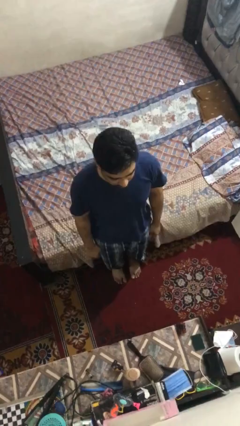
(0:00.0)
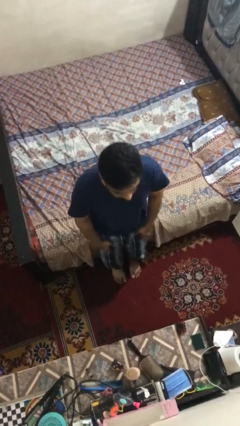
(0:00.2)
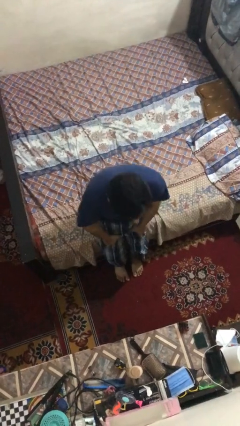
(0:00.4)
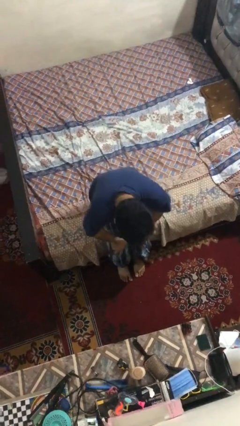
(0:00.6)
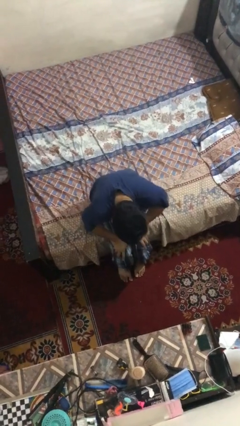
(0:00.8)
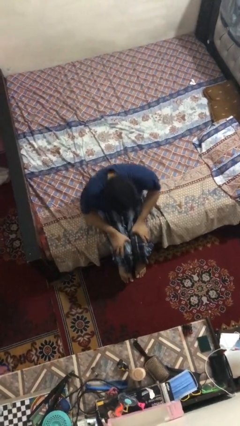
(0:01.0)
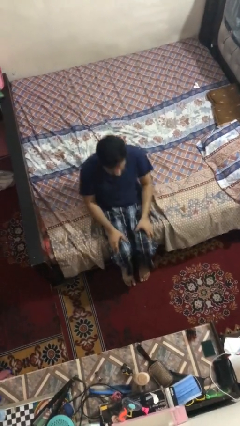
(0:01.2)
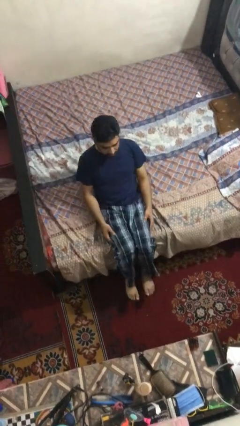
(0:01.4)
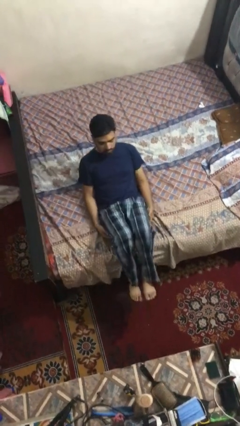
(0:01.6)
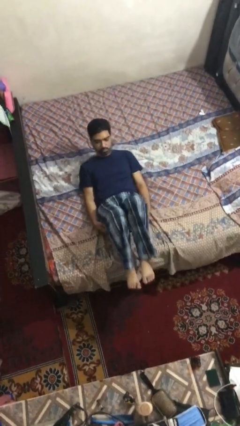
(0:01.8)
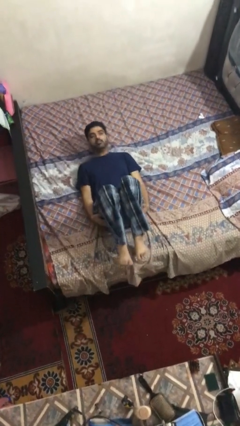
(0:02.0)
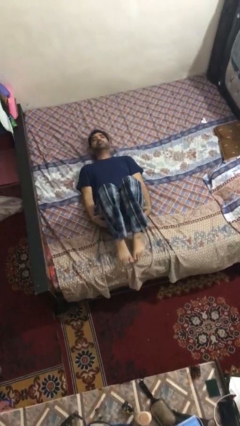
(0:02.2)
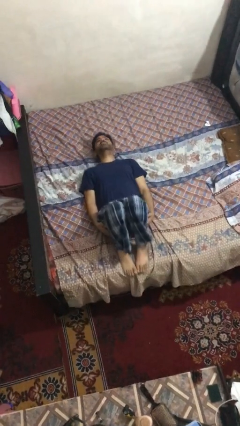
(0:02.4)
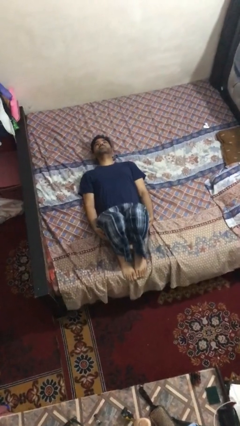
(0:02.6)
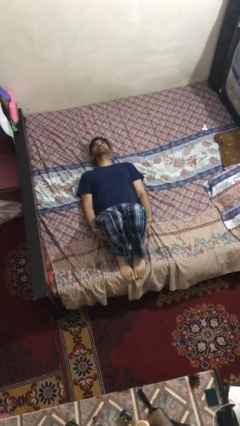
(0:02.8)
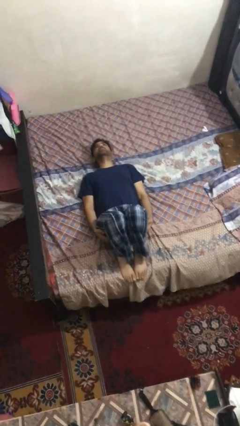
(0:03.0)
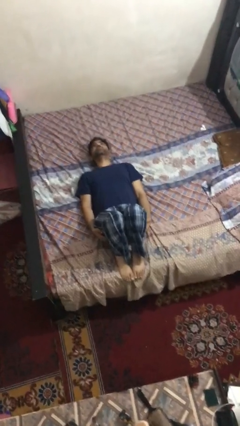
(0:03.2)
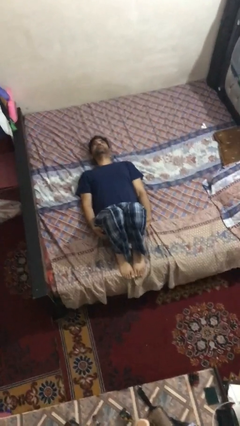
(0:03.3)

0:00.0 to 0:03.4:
person lies down on bed

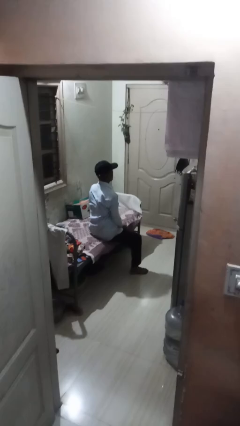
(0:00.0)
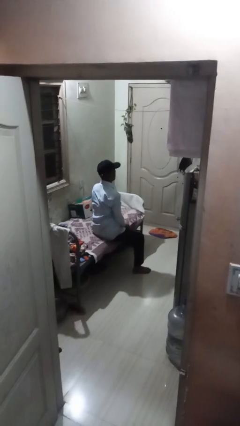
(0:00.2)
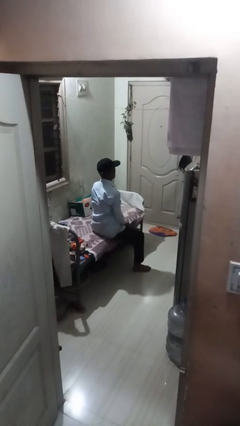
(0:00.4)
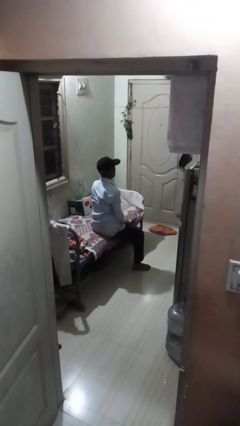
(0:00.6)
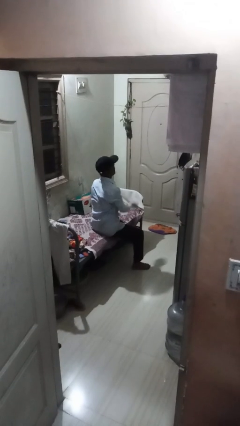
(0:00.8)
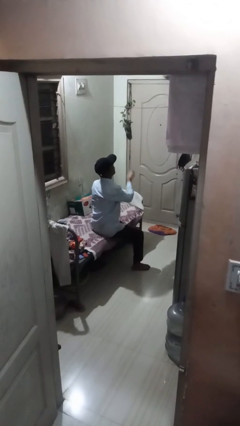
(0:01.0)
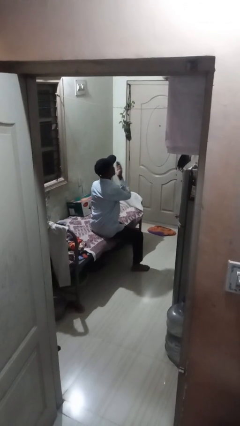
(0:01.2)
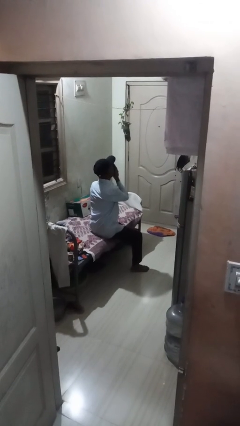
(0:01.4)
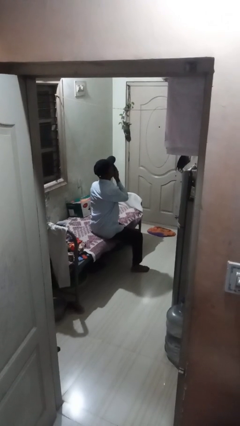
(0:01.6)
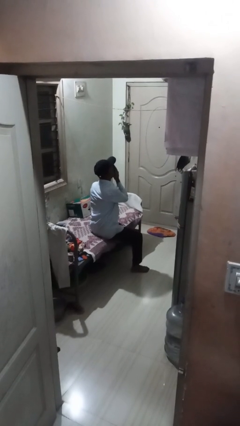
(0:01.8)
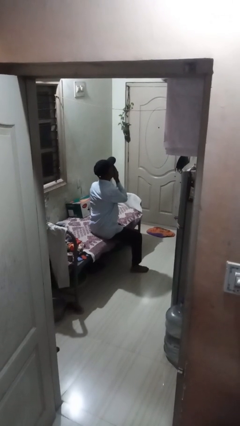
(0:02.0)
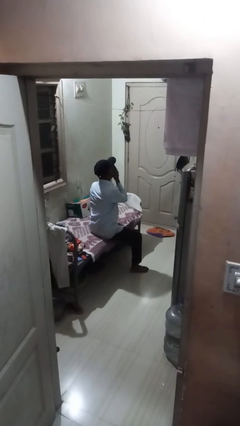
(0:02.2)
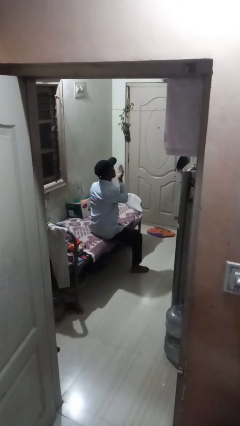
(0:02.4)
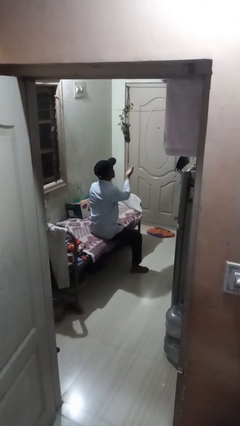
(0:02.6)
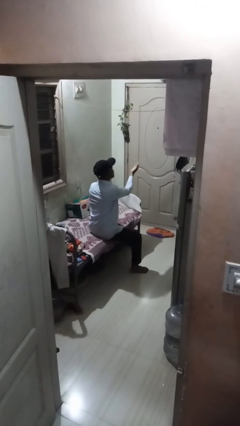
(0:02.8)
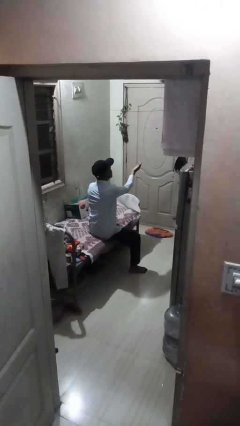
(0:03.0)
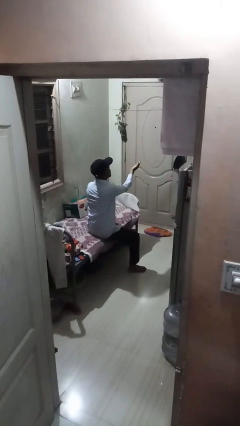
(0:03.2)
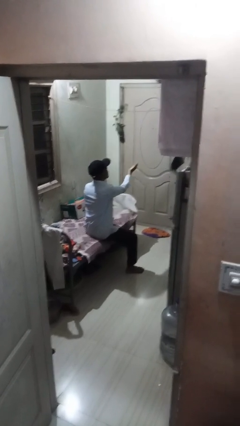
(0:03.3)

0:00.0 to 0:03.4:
person gestures blow kiss

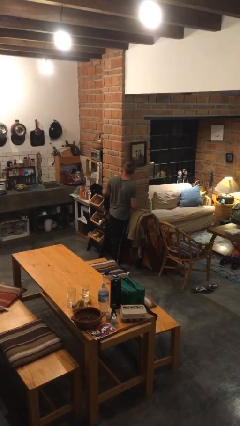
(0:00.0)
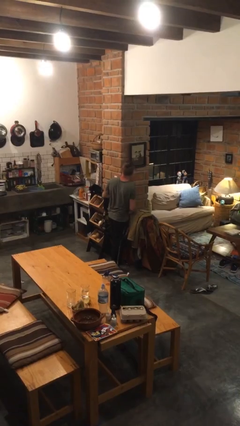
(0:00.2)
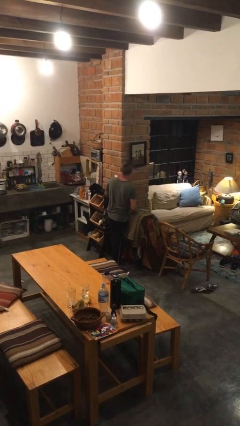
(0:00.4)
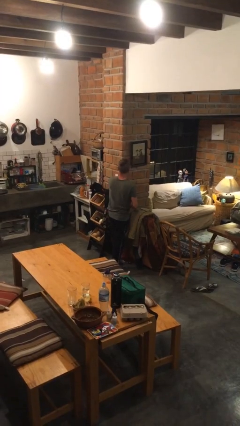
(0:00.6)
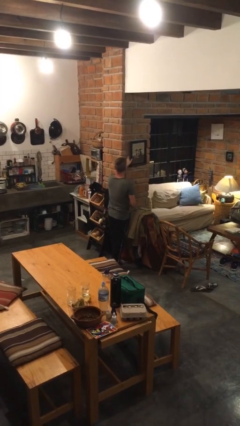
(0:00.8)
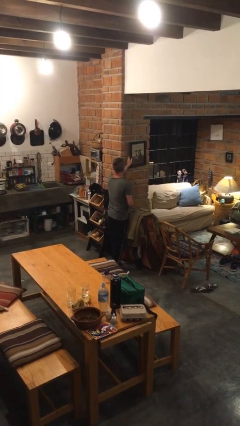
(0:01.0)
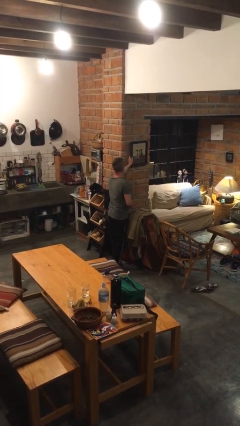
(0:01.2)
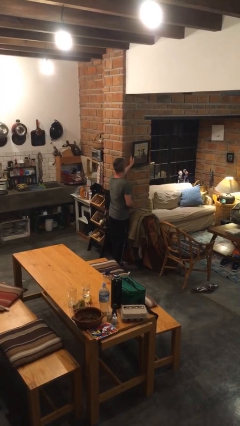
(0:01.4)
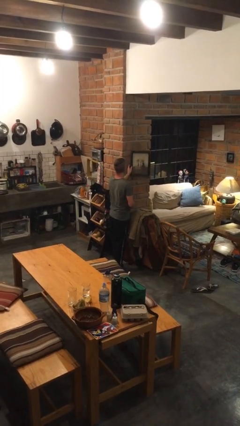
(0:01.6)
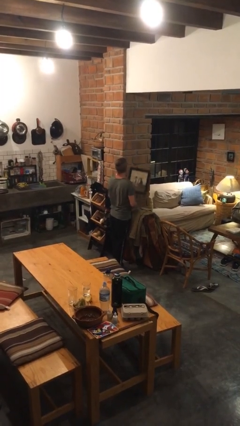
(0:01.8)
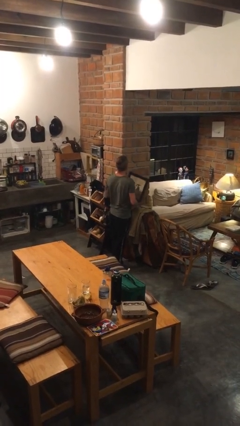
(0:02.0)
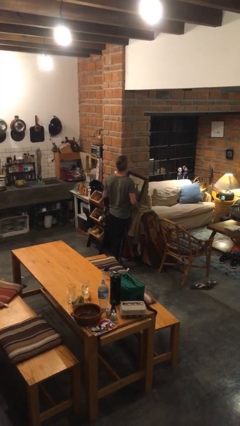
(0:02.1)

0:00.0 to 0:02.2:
person takes down picture frame

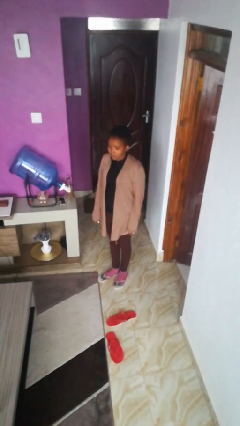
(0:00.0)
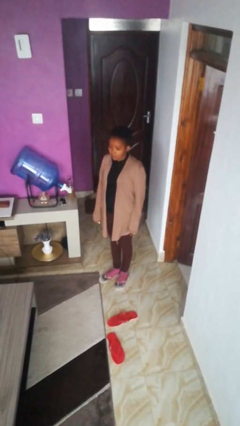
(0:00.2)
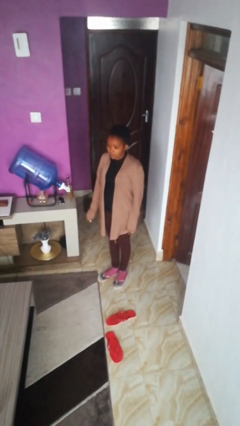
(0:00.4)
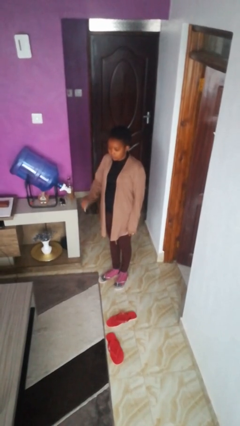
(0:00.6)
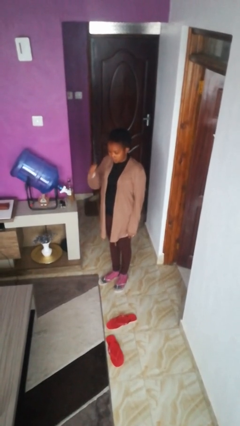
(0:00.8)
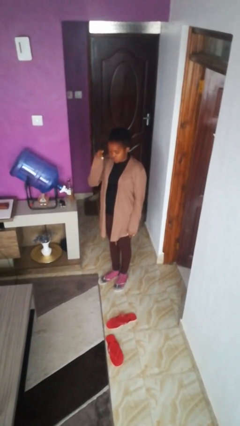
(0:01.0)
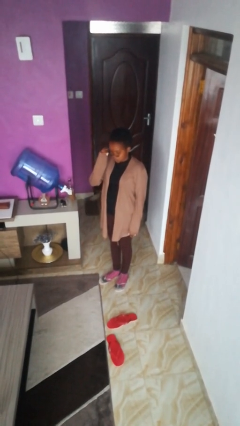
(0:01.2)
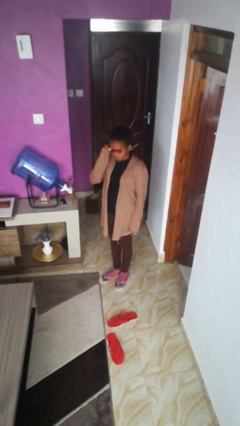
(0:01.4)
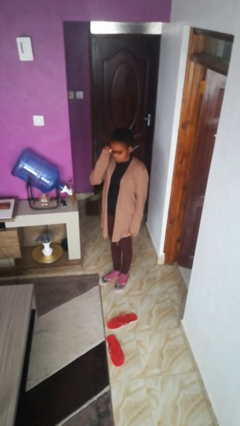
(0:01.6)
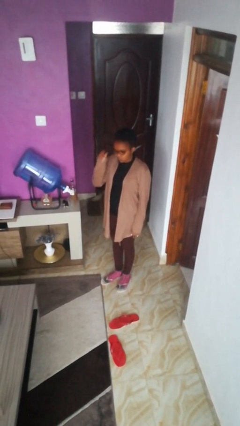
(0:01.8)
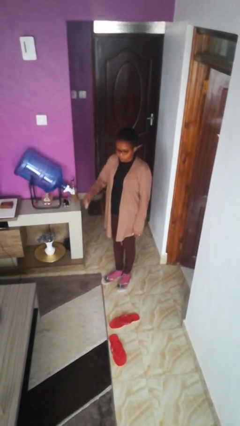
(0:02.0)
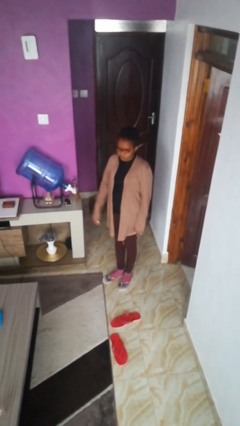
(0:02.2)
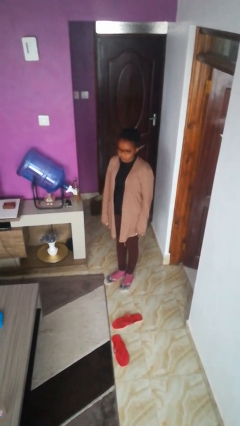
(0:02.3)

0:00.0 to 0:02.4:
person puts on glasses

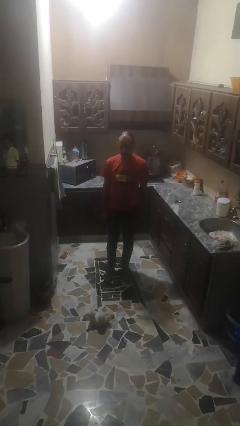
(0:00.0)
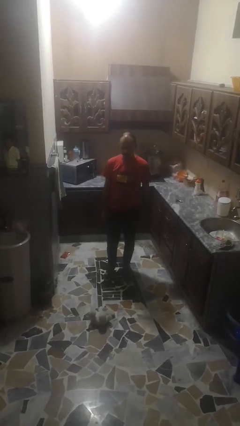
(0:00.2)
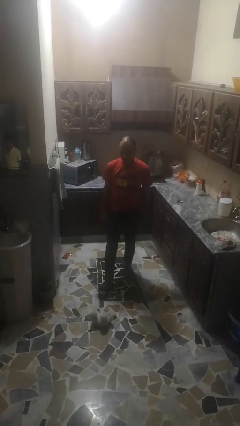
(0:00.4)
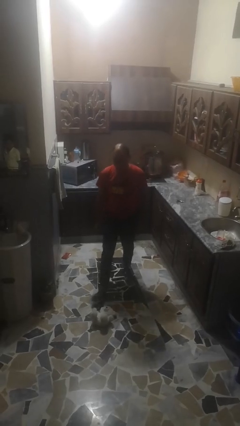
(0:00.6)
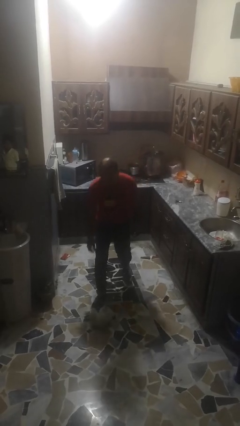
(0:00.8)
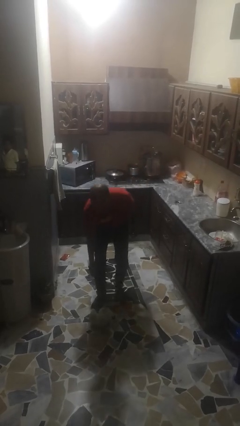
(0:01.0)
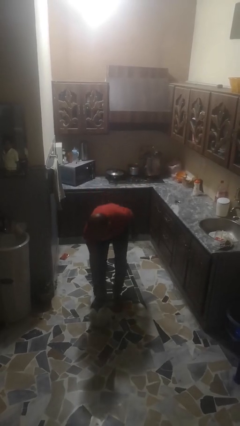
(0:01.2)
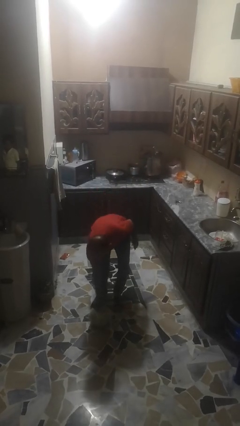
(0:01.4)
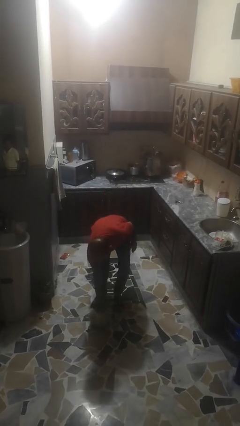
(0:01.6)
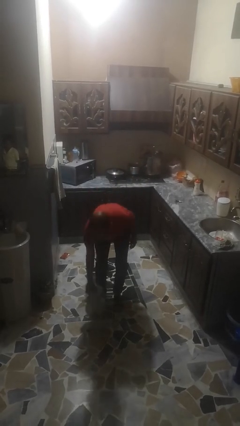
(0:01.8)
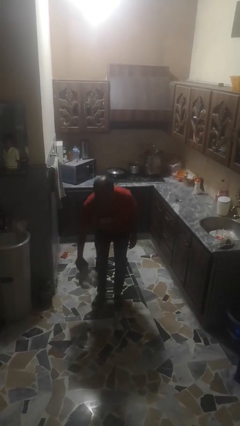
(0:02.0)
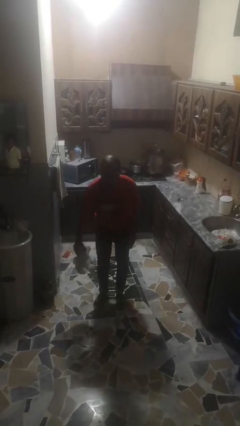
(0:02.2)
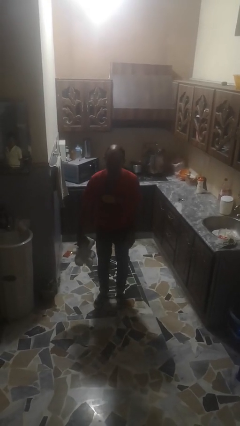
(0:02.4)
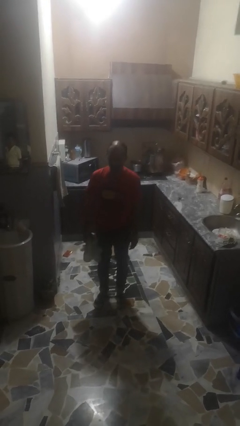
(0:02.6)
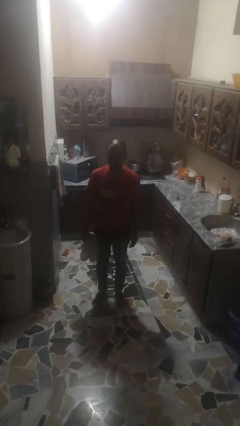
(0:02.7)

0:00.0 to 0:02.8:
person picks up object from floor

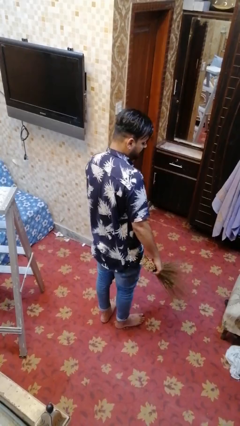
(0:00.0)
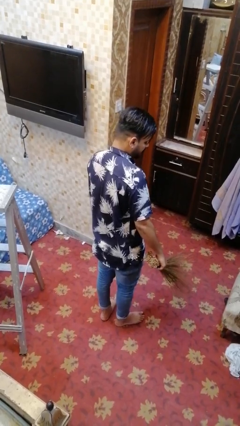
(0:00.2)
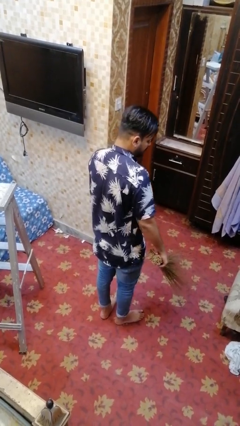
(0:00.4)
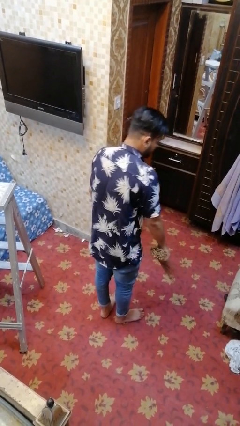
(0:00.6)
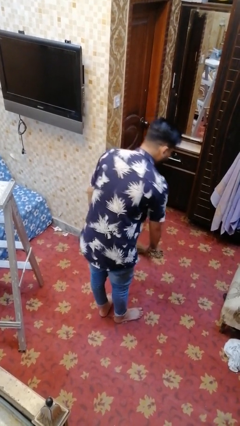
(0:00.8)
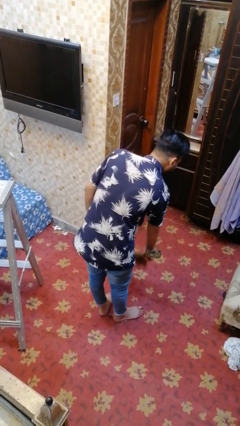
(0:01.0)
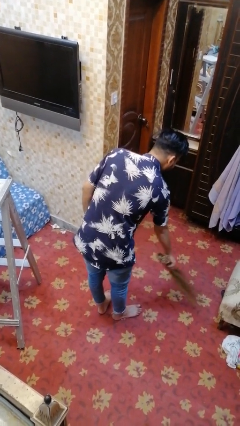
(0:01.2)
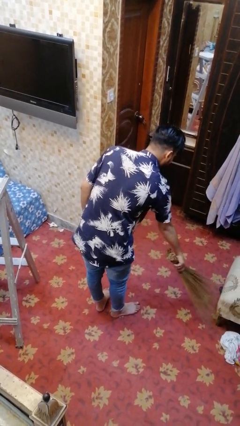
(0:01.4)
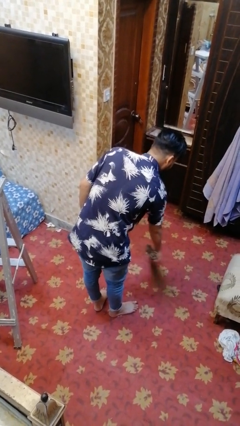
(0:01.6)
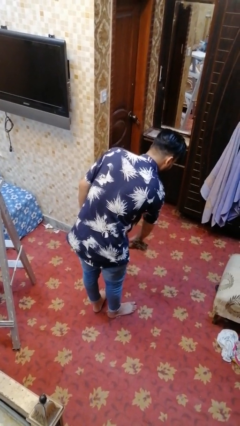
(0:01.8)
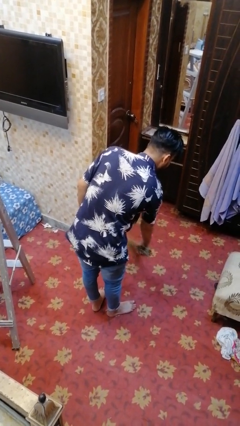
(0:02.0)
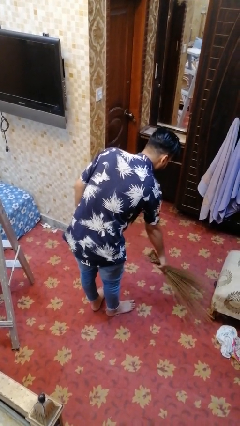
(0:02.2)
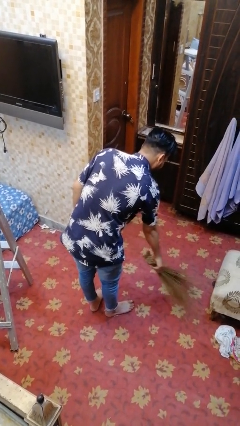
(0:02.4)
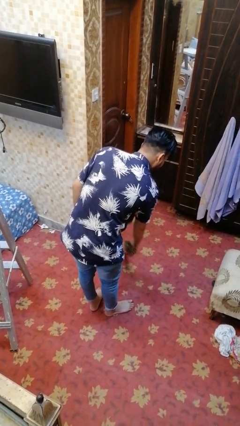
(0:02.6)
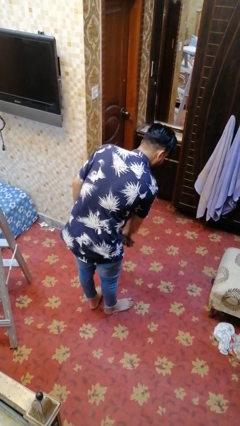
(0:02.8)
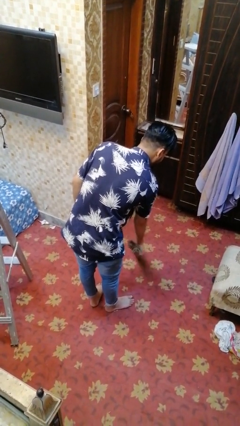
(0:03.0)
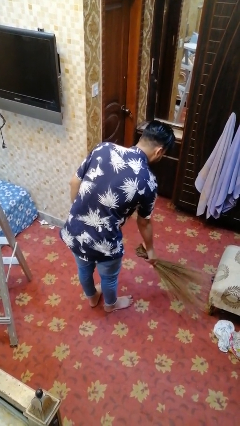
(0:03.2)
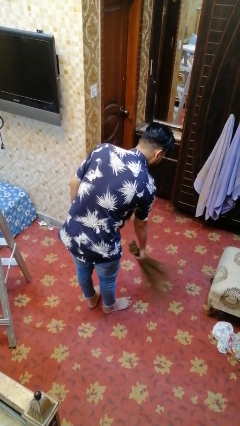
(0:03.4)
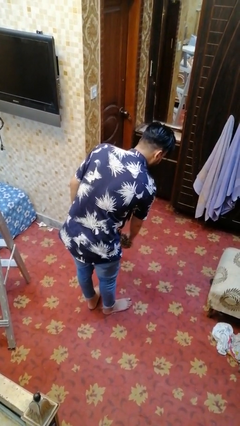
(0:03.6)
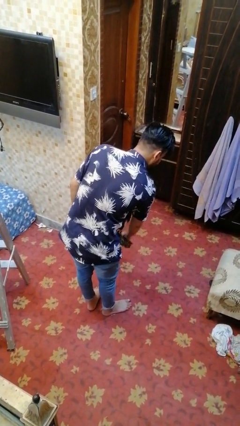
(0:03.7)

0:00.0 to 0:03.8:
person sweeps floor
